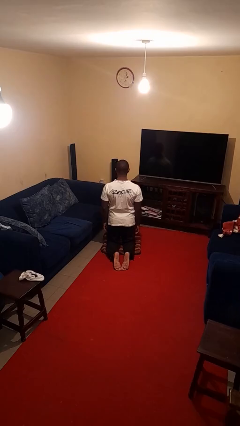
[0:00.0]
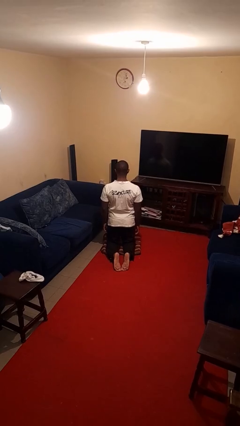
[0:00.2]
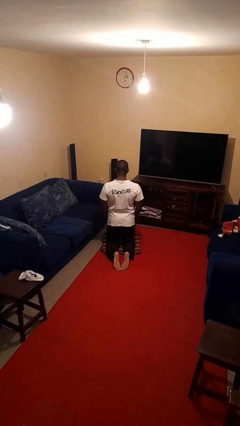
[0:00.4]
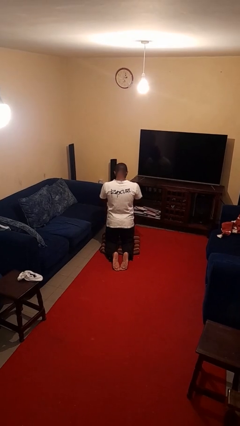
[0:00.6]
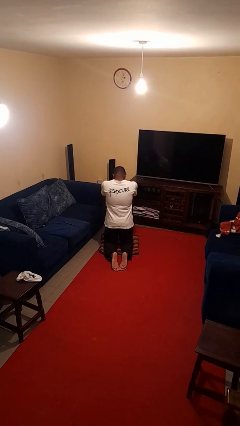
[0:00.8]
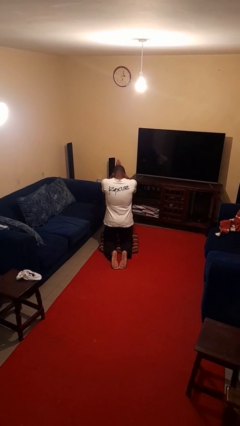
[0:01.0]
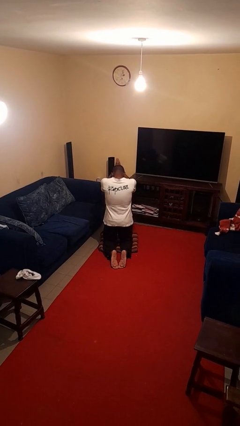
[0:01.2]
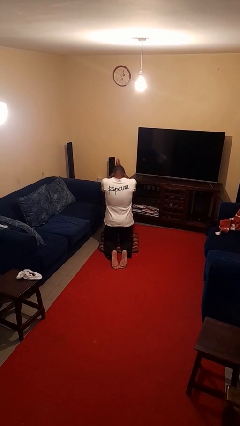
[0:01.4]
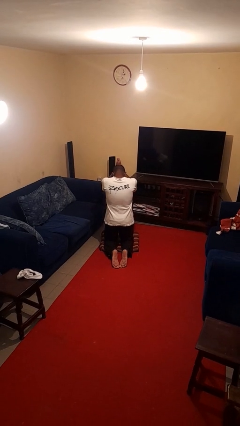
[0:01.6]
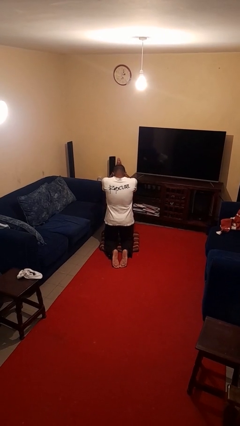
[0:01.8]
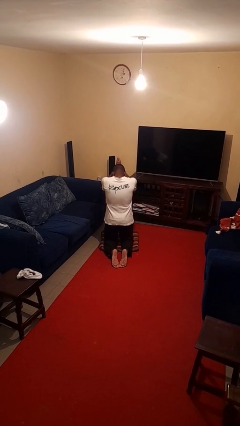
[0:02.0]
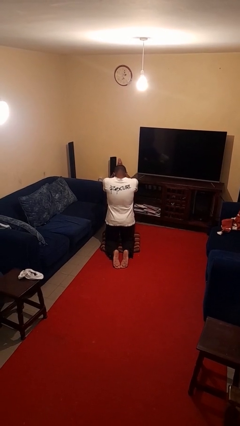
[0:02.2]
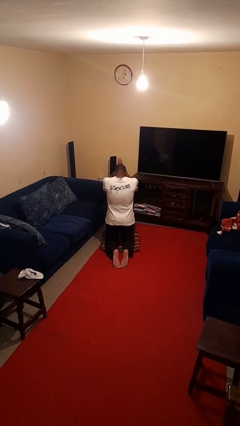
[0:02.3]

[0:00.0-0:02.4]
person prays

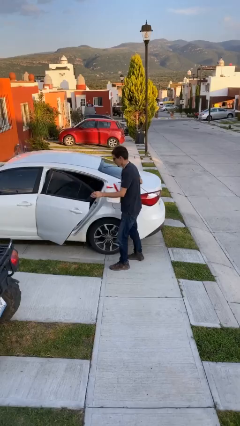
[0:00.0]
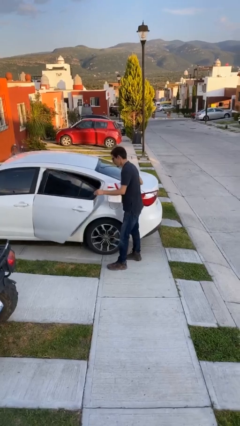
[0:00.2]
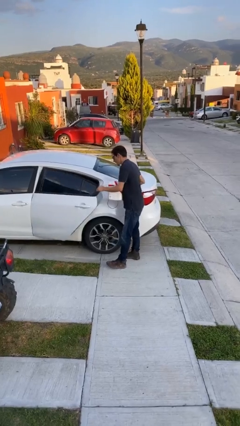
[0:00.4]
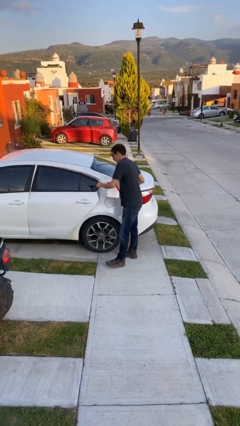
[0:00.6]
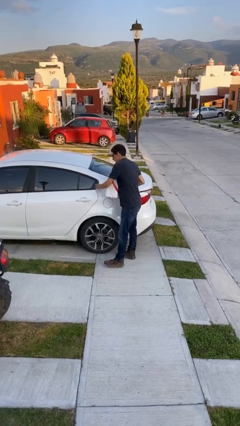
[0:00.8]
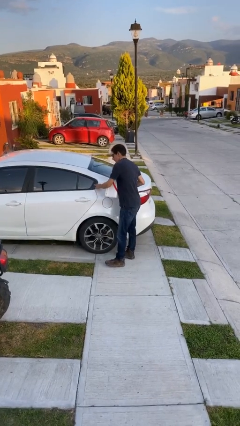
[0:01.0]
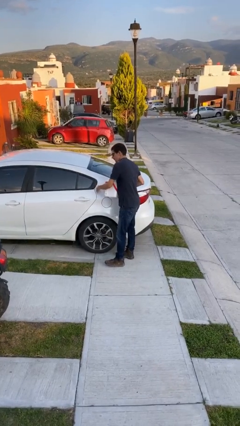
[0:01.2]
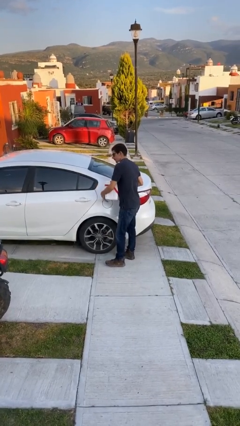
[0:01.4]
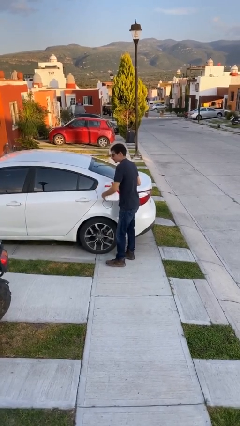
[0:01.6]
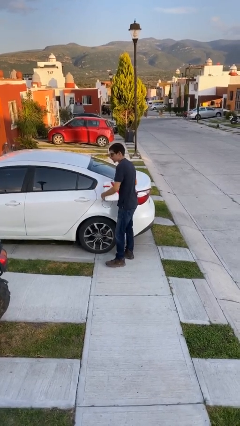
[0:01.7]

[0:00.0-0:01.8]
person closes car door

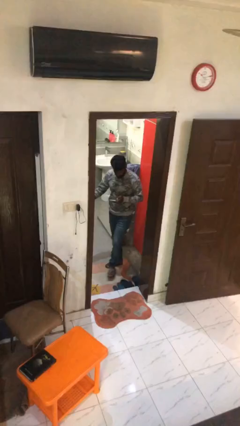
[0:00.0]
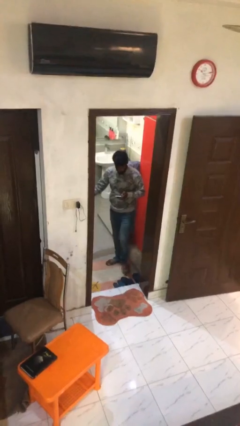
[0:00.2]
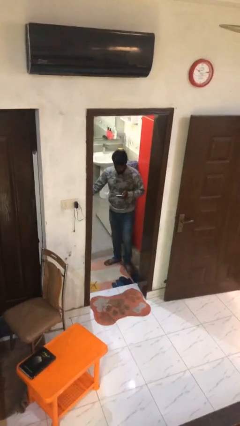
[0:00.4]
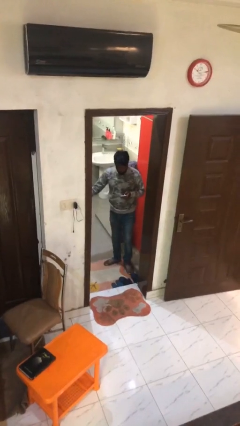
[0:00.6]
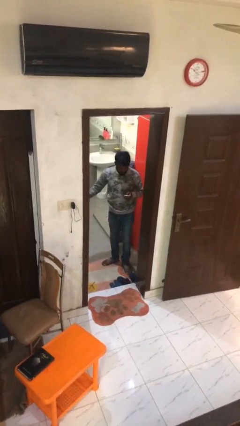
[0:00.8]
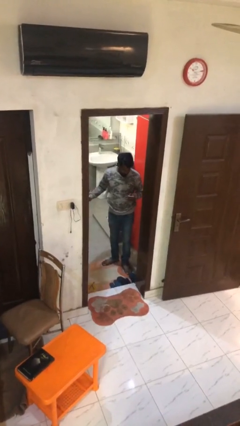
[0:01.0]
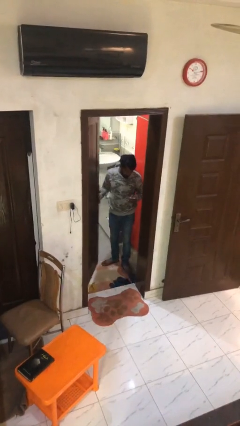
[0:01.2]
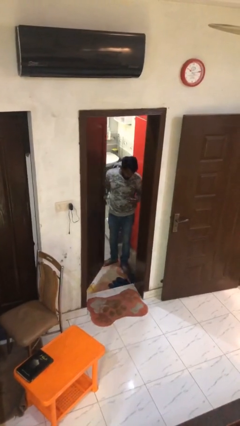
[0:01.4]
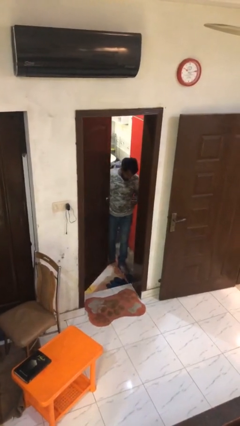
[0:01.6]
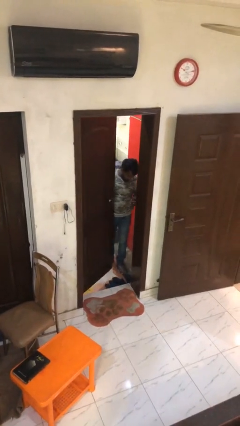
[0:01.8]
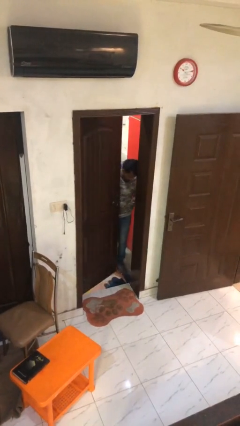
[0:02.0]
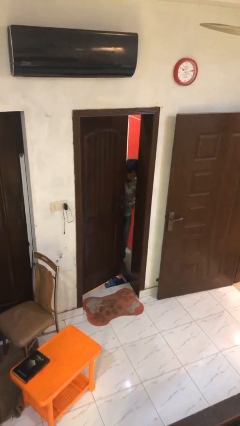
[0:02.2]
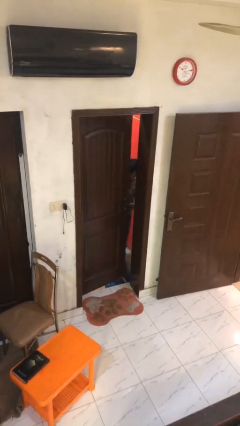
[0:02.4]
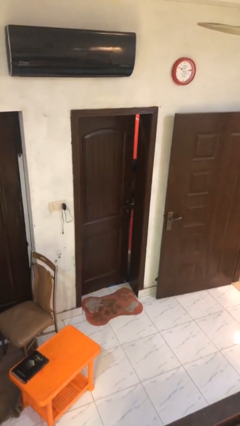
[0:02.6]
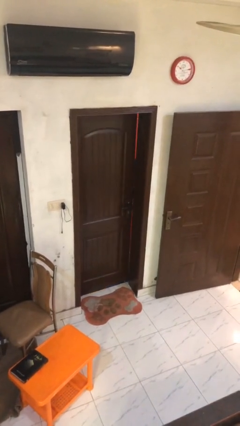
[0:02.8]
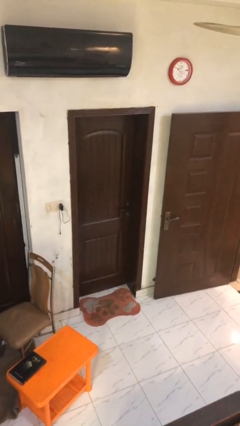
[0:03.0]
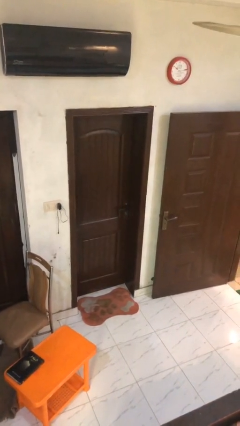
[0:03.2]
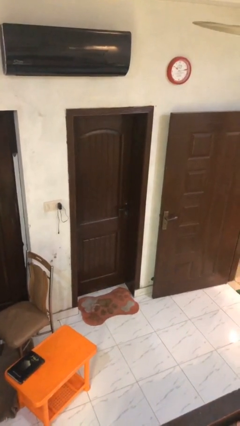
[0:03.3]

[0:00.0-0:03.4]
person closes facility door

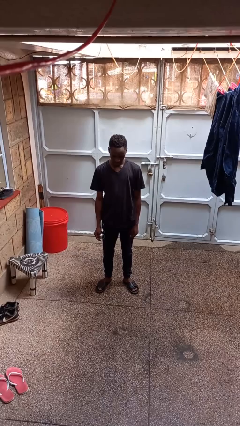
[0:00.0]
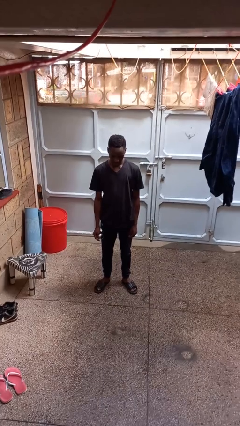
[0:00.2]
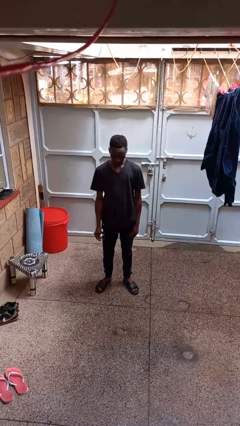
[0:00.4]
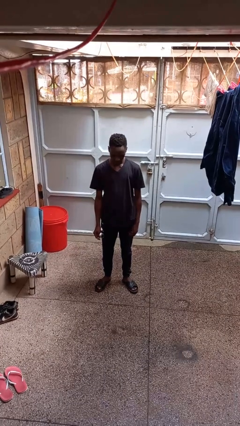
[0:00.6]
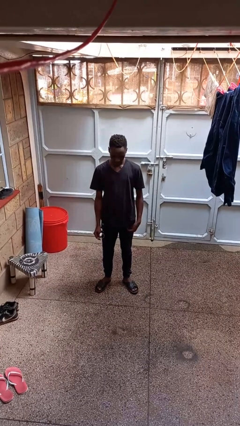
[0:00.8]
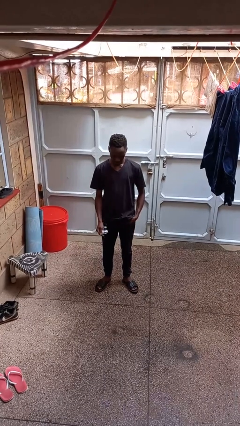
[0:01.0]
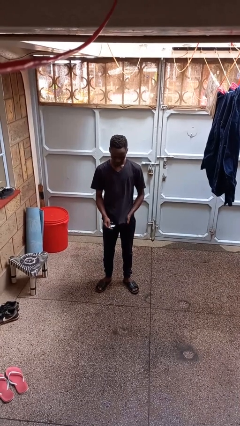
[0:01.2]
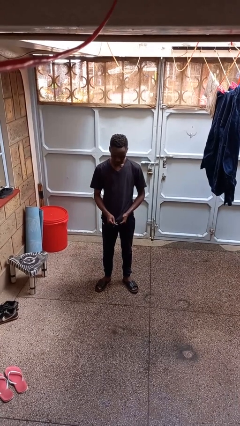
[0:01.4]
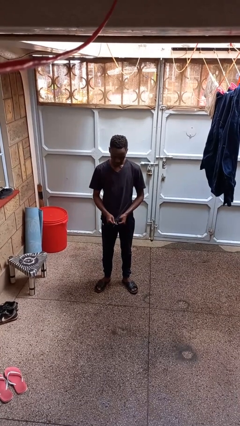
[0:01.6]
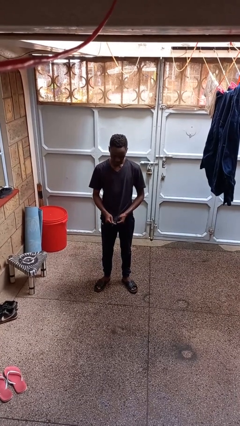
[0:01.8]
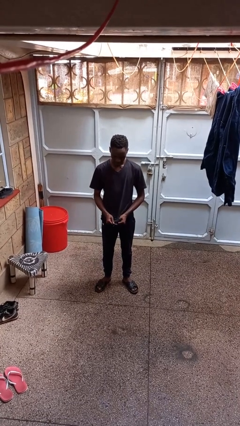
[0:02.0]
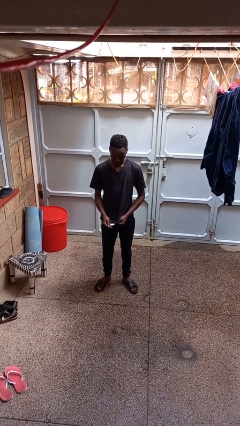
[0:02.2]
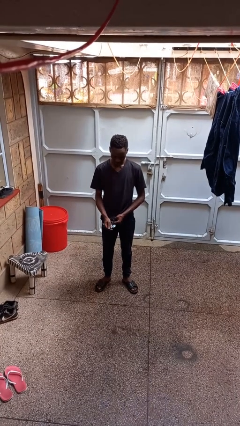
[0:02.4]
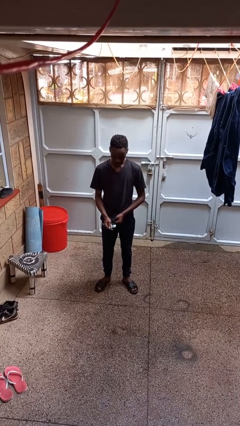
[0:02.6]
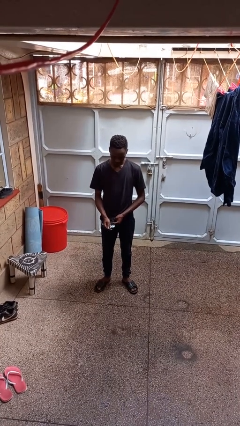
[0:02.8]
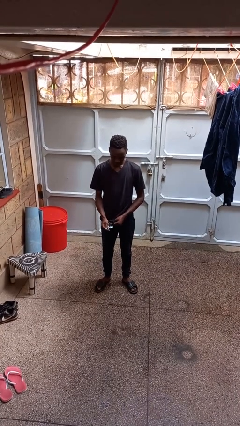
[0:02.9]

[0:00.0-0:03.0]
person cleans eyeglasses

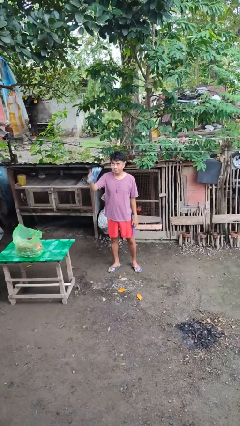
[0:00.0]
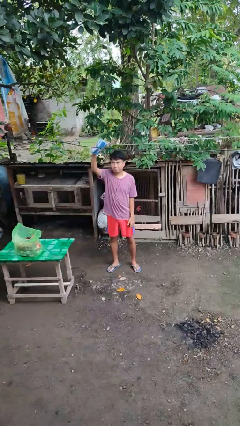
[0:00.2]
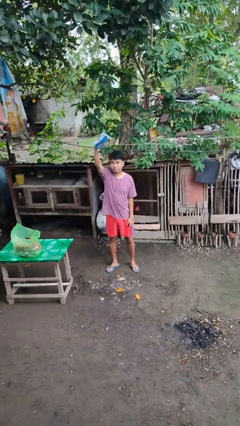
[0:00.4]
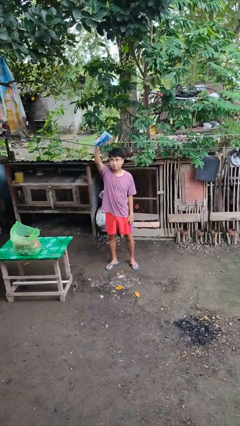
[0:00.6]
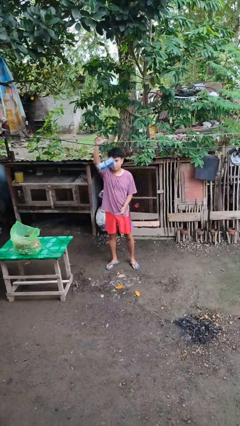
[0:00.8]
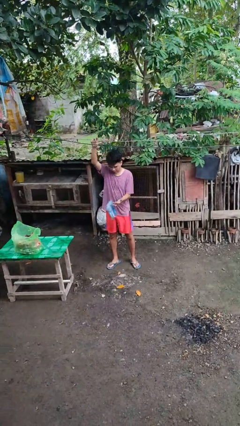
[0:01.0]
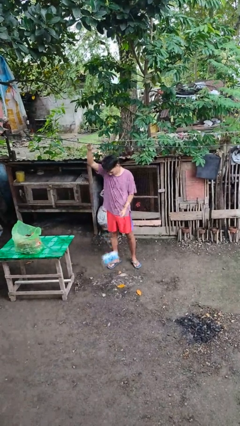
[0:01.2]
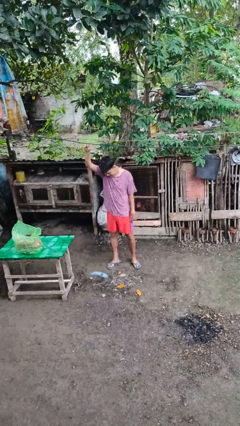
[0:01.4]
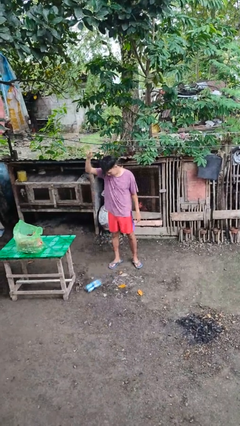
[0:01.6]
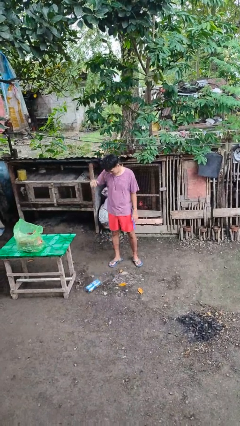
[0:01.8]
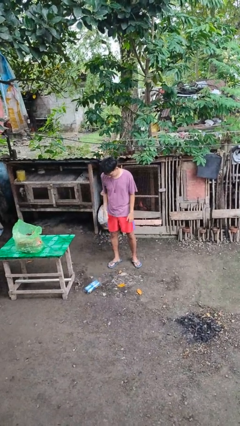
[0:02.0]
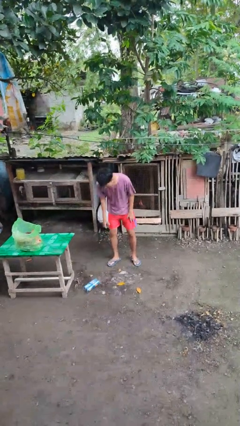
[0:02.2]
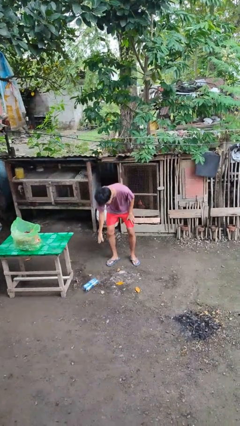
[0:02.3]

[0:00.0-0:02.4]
person drops object

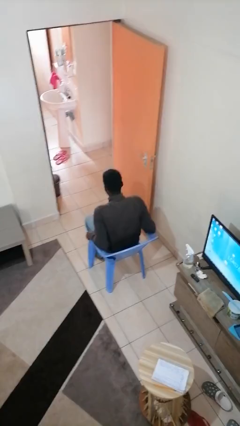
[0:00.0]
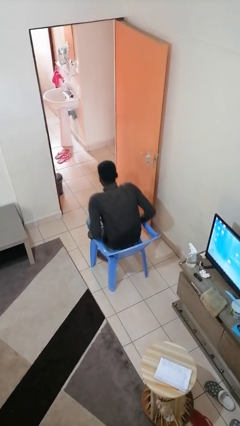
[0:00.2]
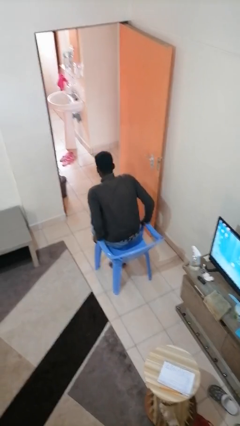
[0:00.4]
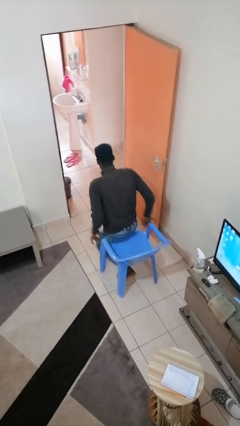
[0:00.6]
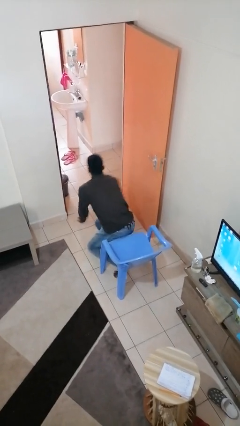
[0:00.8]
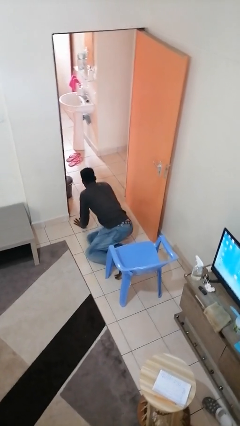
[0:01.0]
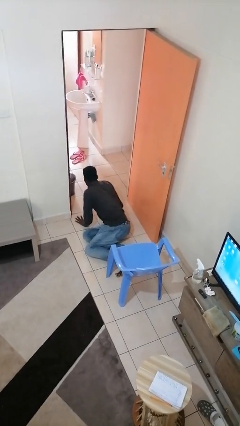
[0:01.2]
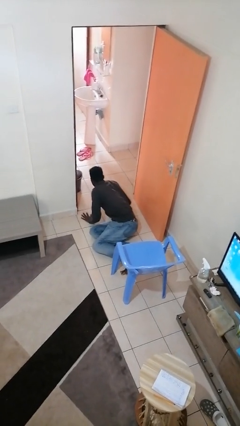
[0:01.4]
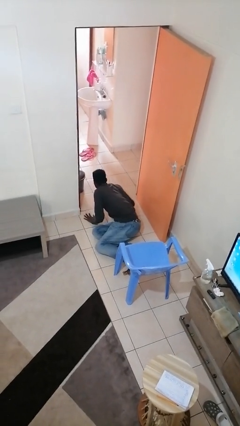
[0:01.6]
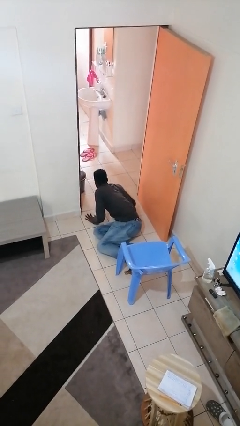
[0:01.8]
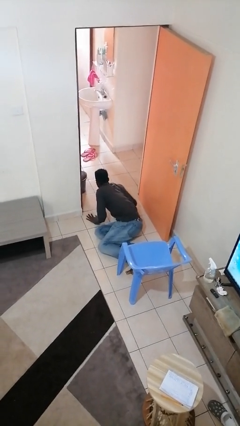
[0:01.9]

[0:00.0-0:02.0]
person falls from chair

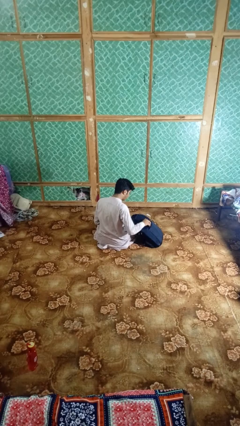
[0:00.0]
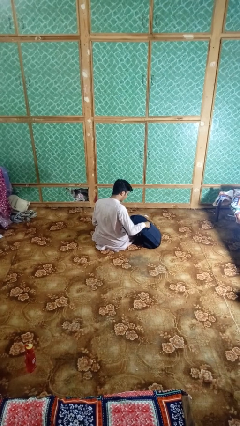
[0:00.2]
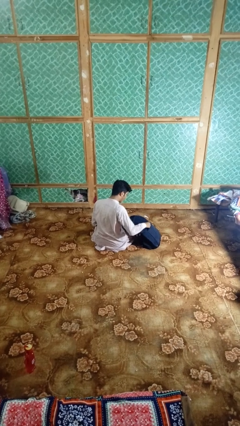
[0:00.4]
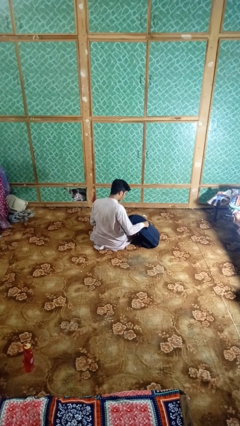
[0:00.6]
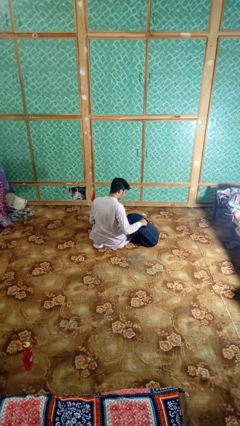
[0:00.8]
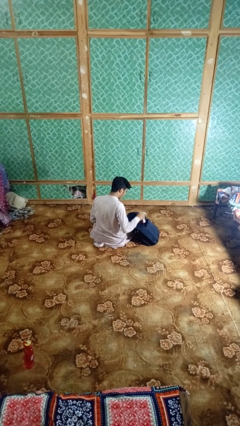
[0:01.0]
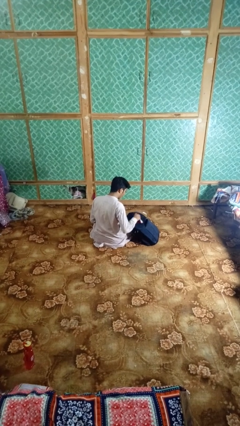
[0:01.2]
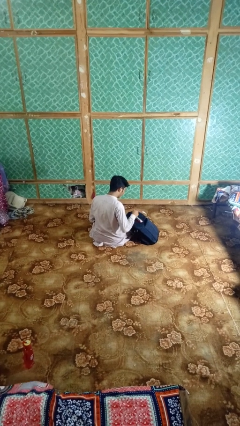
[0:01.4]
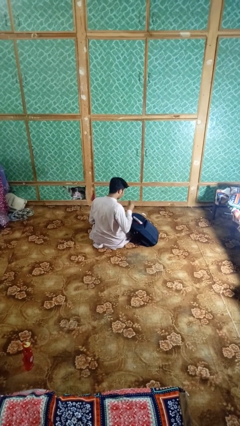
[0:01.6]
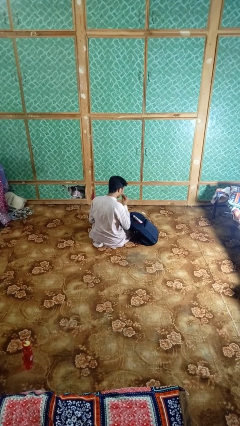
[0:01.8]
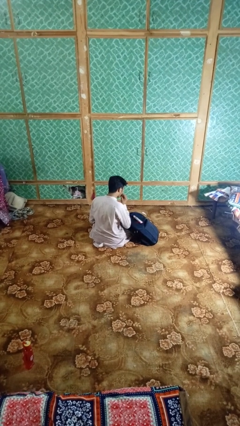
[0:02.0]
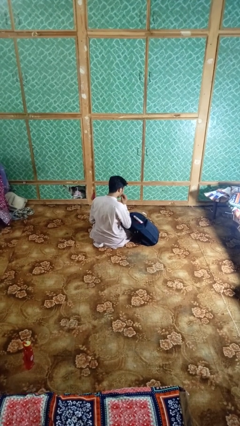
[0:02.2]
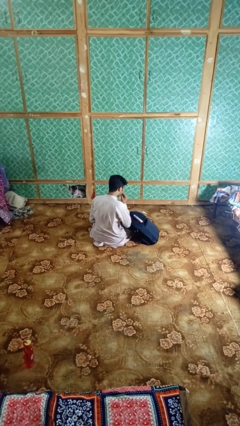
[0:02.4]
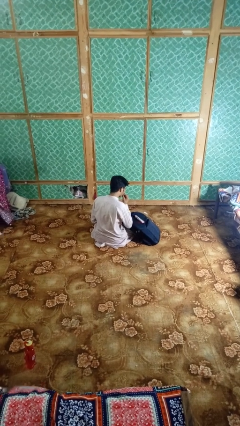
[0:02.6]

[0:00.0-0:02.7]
person eats snack from bag
